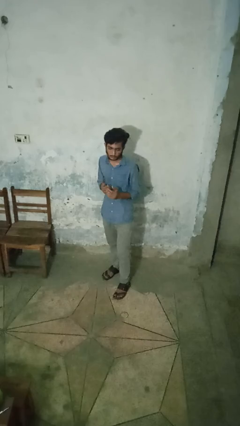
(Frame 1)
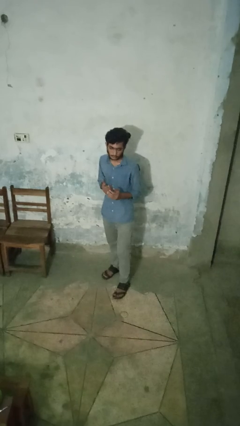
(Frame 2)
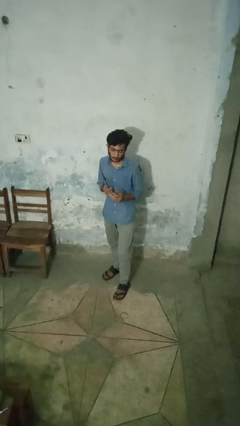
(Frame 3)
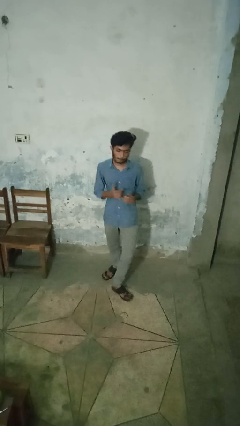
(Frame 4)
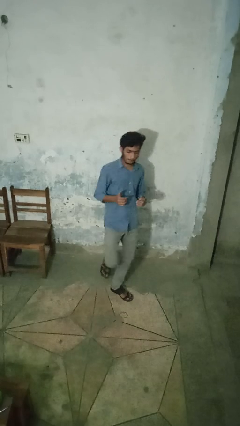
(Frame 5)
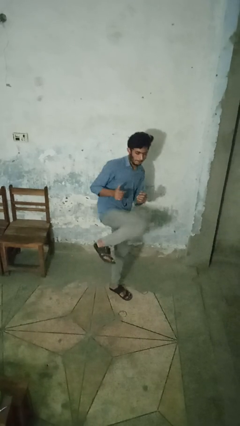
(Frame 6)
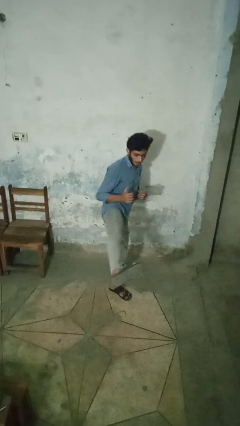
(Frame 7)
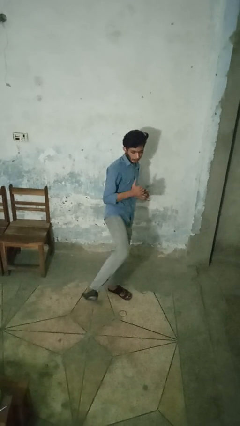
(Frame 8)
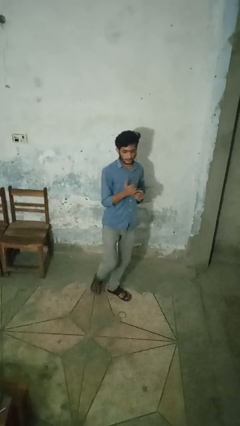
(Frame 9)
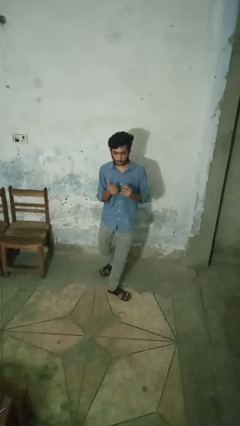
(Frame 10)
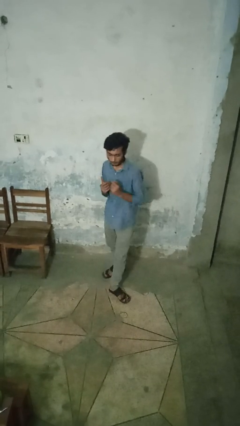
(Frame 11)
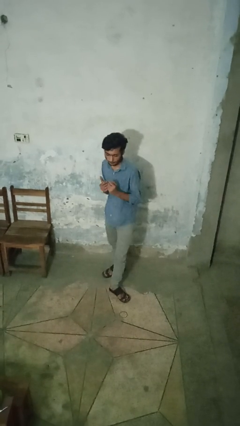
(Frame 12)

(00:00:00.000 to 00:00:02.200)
person karate kicks

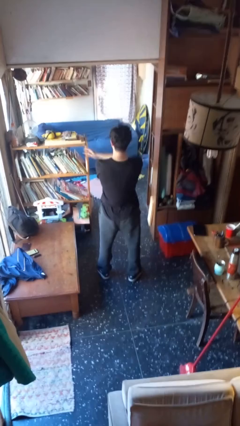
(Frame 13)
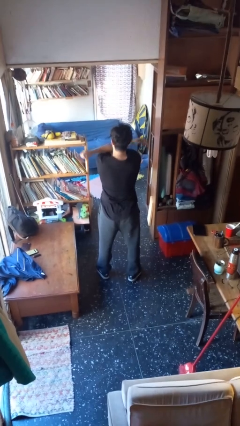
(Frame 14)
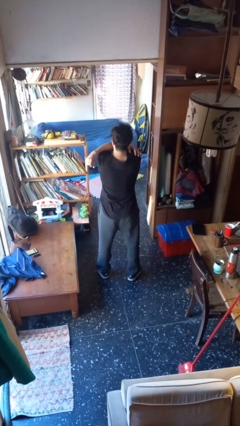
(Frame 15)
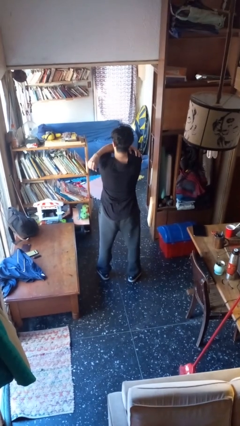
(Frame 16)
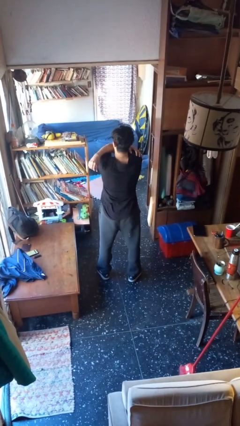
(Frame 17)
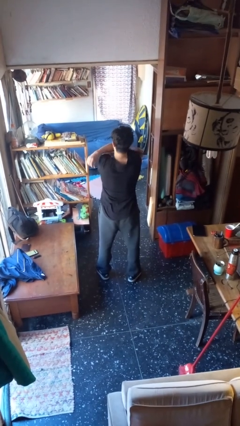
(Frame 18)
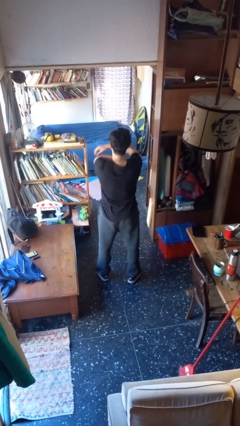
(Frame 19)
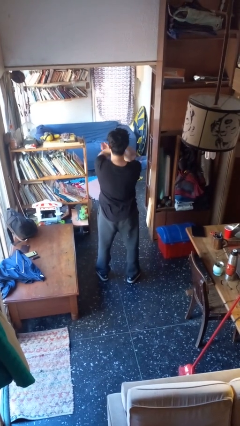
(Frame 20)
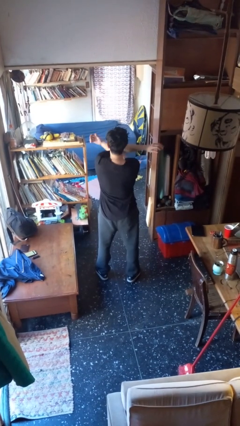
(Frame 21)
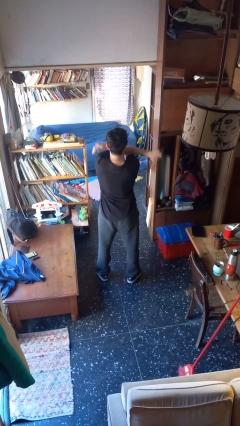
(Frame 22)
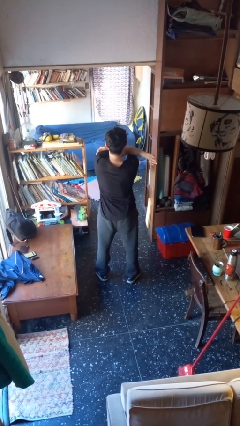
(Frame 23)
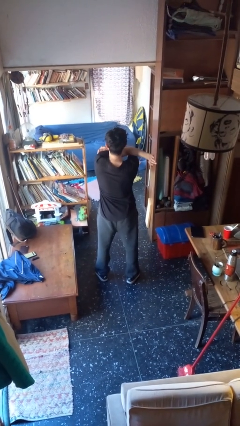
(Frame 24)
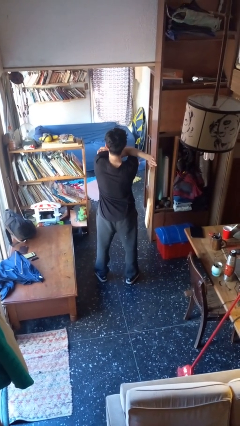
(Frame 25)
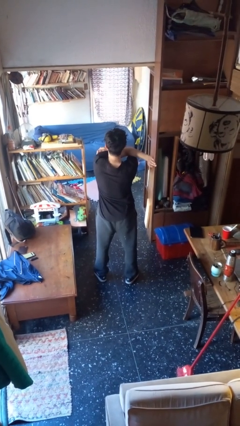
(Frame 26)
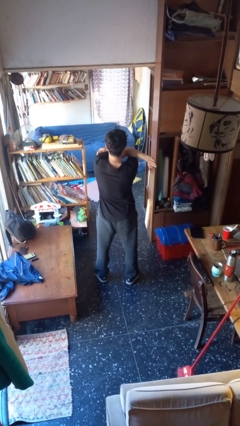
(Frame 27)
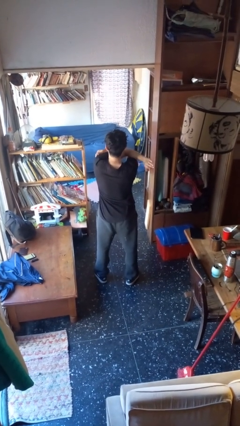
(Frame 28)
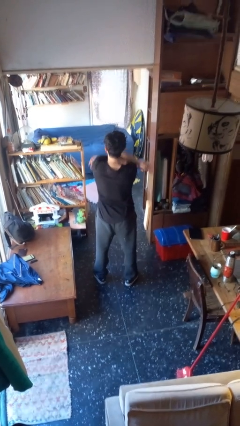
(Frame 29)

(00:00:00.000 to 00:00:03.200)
person stretches arms to side

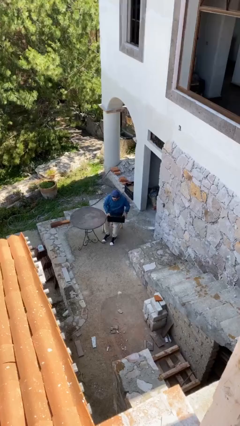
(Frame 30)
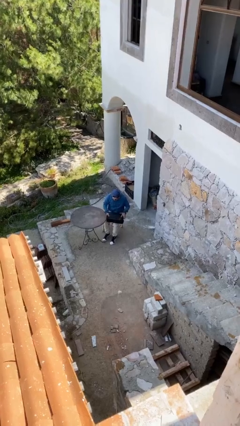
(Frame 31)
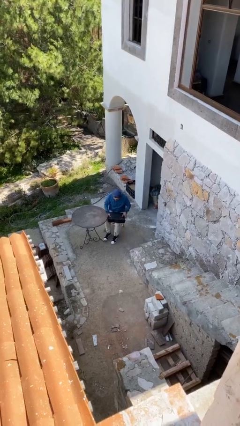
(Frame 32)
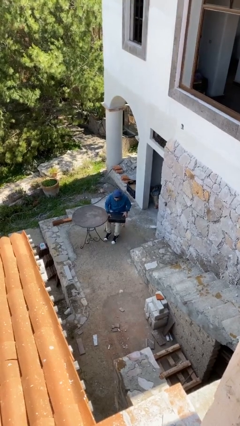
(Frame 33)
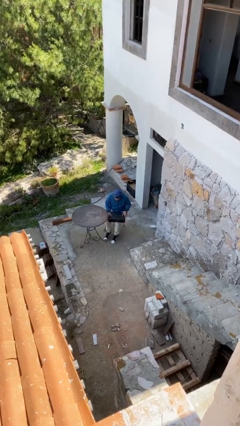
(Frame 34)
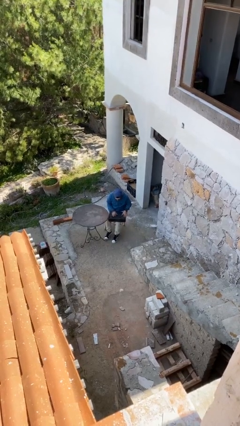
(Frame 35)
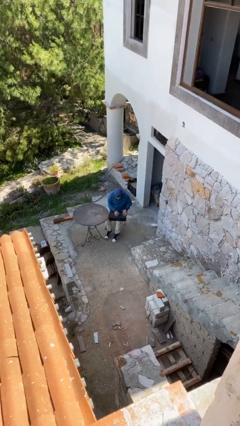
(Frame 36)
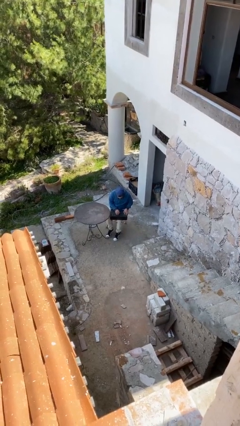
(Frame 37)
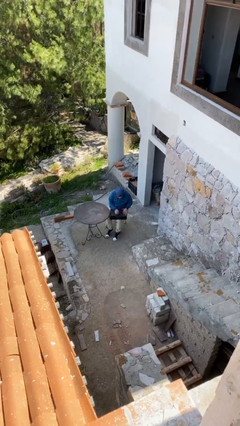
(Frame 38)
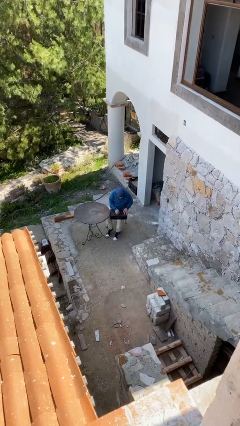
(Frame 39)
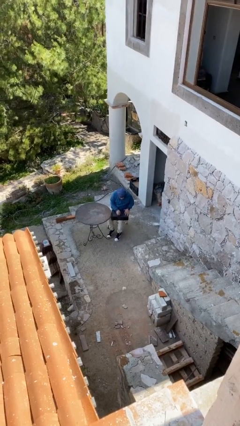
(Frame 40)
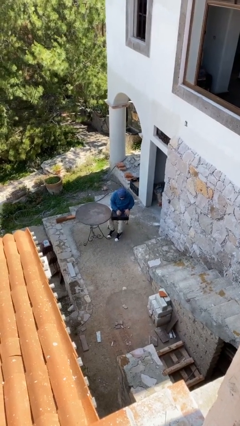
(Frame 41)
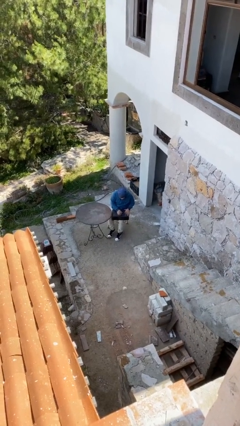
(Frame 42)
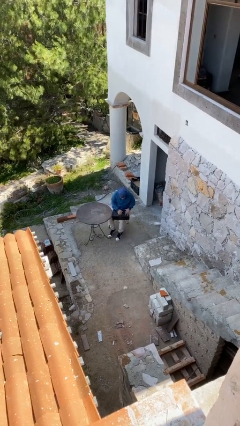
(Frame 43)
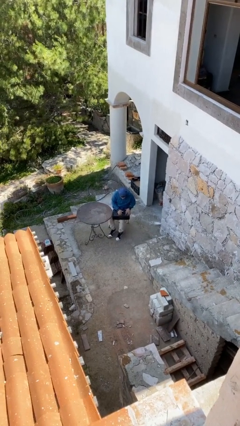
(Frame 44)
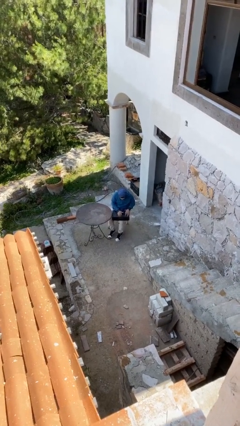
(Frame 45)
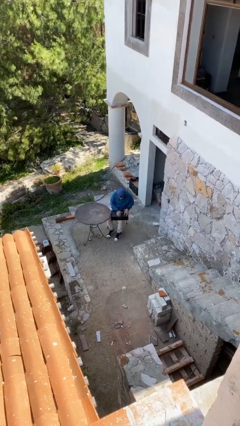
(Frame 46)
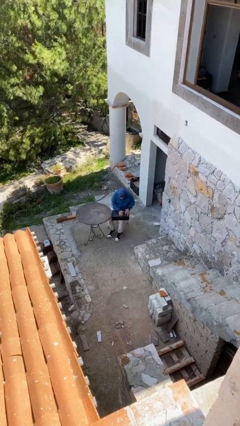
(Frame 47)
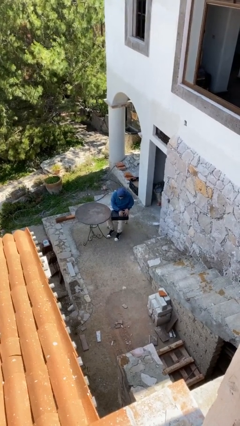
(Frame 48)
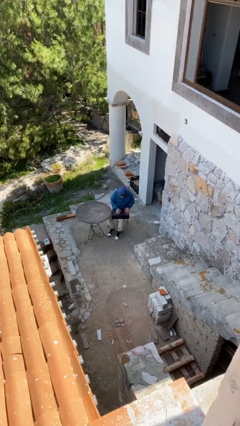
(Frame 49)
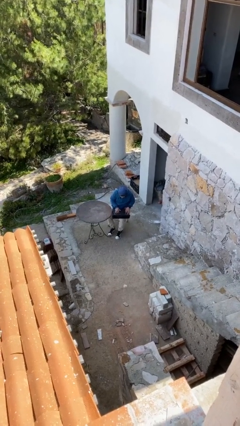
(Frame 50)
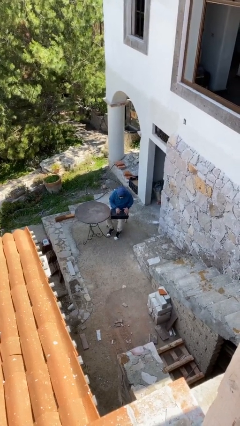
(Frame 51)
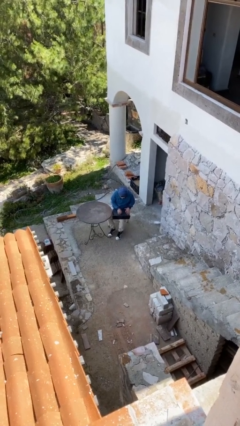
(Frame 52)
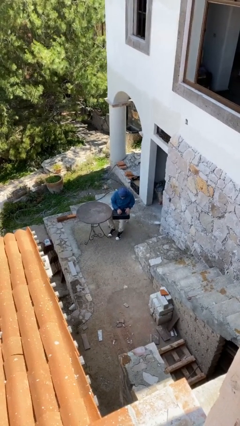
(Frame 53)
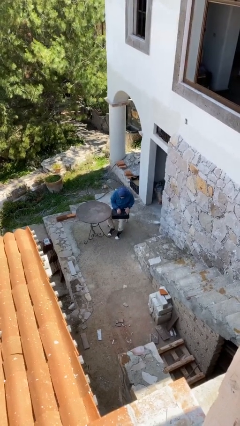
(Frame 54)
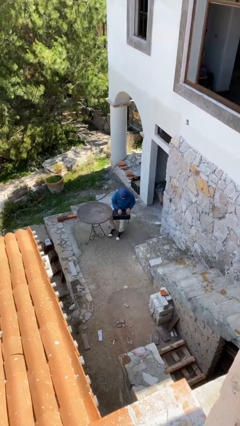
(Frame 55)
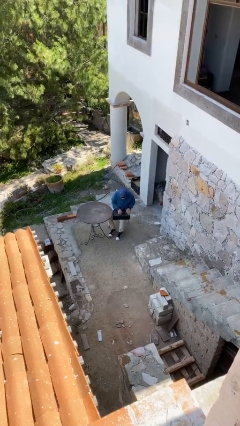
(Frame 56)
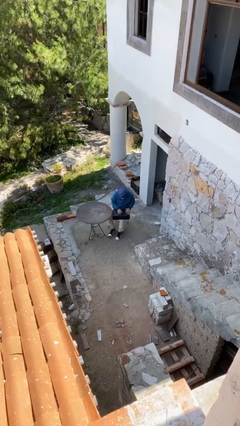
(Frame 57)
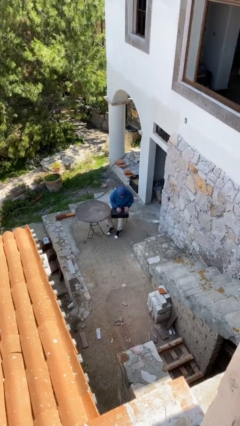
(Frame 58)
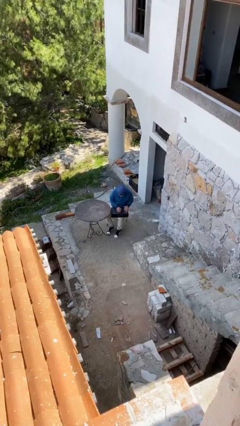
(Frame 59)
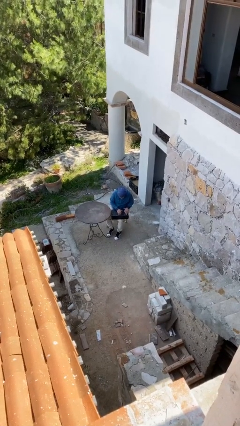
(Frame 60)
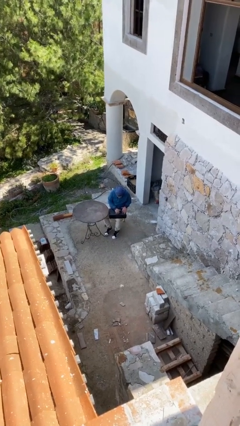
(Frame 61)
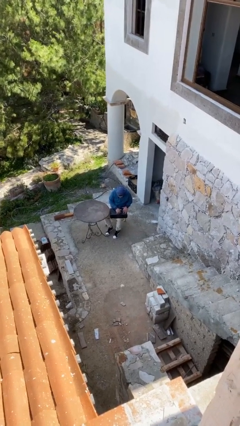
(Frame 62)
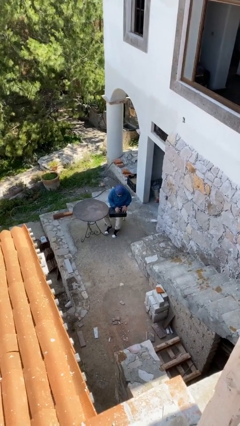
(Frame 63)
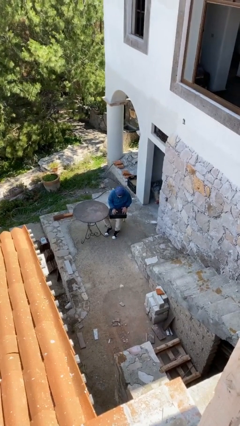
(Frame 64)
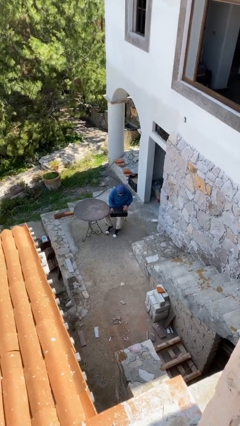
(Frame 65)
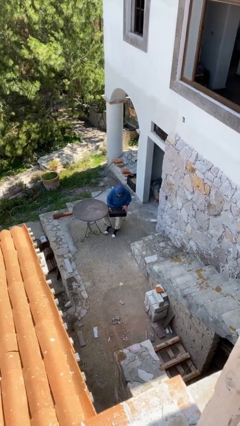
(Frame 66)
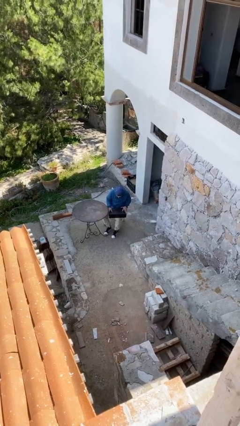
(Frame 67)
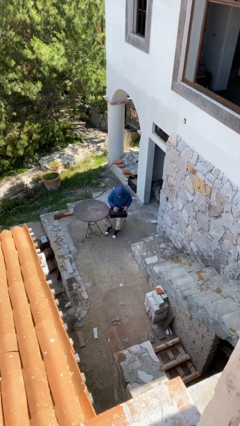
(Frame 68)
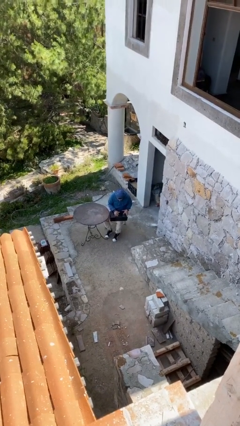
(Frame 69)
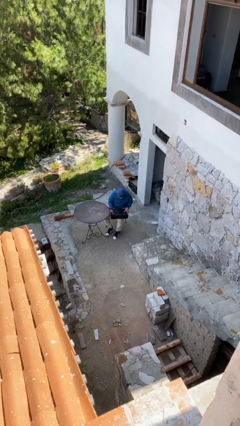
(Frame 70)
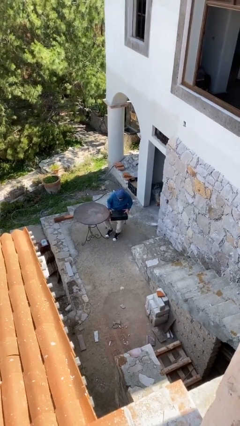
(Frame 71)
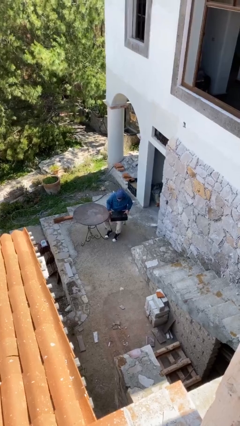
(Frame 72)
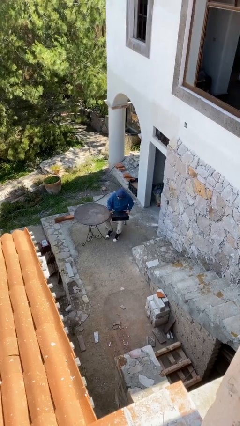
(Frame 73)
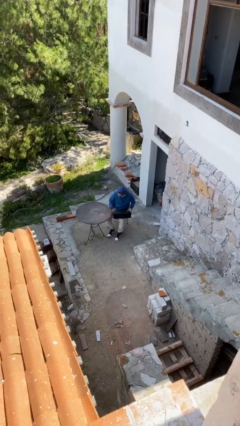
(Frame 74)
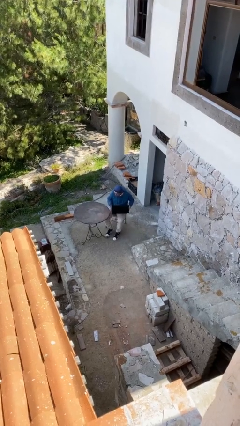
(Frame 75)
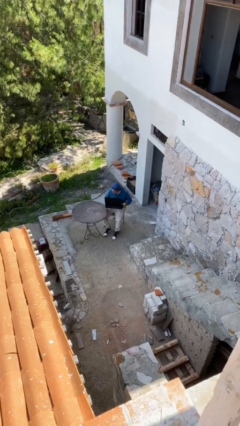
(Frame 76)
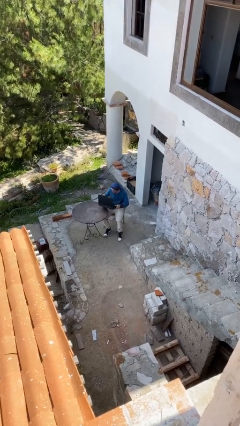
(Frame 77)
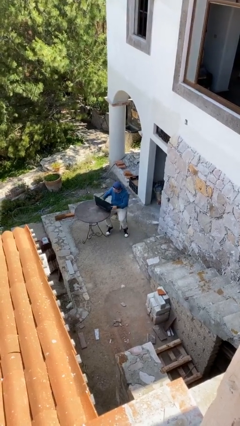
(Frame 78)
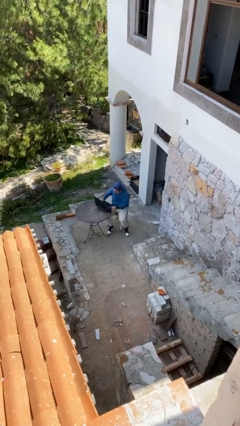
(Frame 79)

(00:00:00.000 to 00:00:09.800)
person interacts with laptop

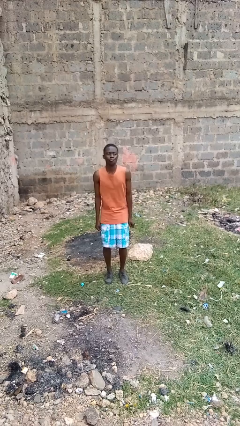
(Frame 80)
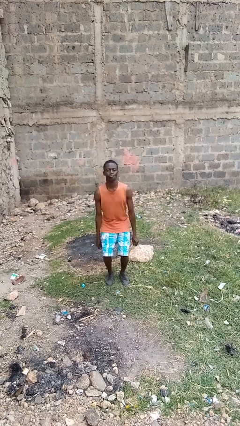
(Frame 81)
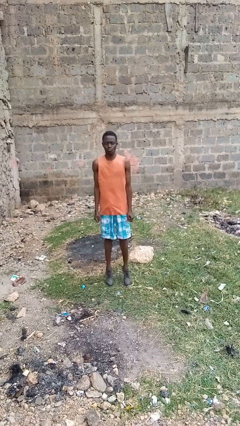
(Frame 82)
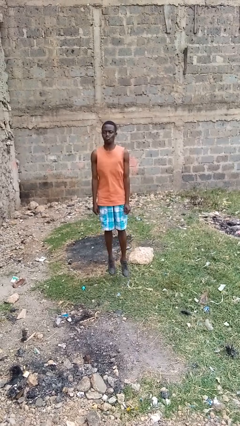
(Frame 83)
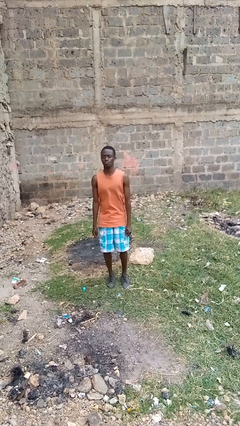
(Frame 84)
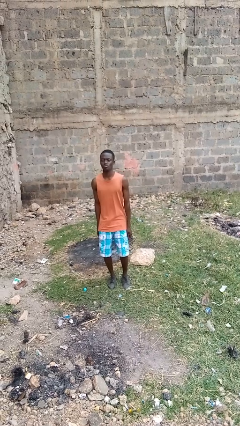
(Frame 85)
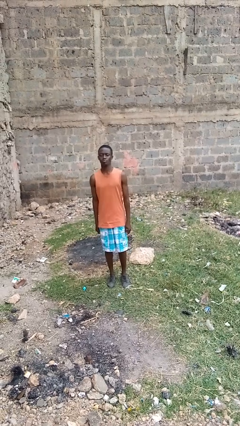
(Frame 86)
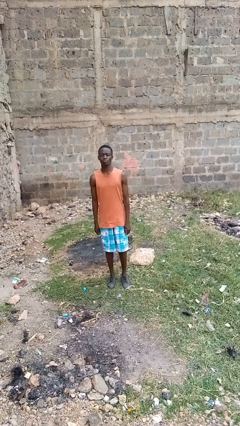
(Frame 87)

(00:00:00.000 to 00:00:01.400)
person jumps

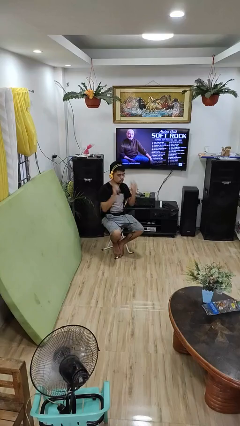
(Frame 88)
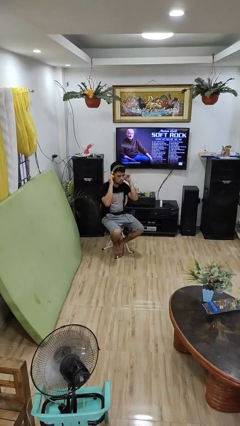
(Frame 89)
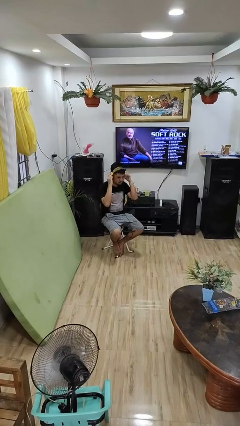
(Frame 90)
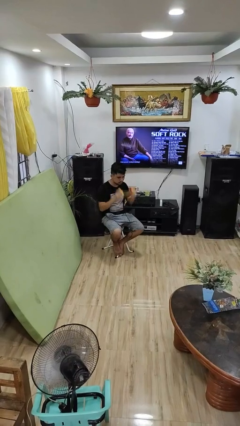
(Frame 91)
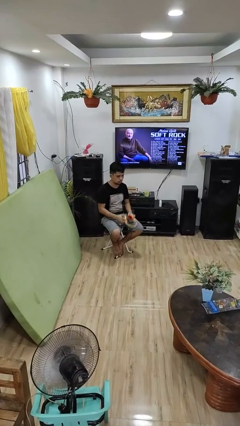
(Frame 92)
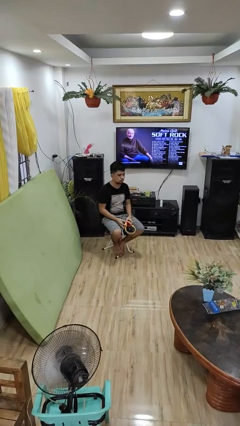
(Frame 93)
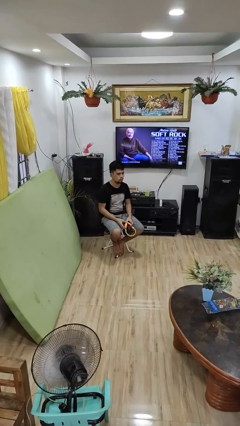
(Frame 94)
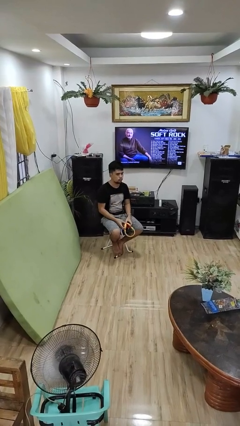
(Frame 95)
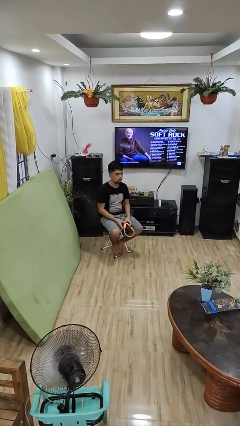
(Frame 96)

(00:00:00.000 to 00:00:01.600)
person takes off headphones
